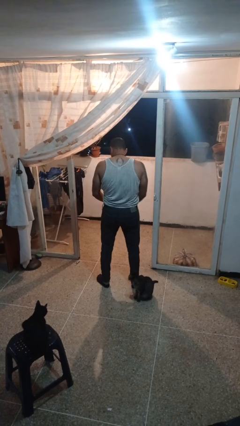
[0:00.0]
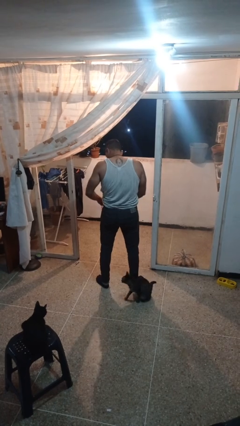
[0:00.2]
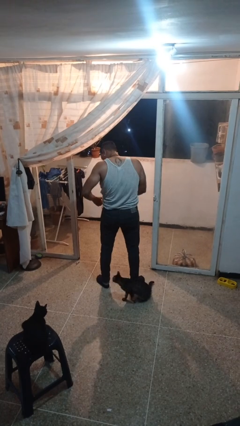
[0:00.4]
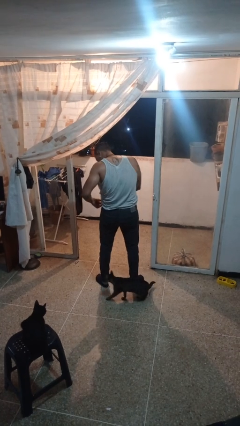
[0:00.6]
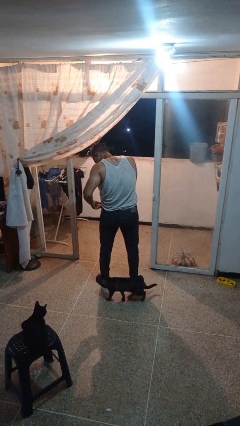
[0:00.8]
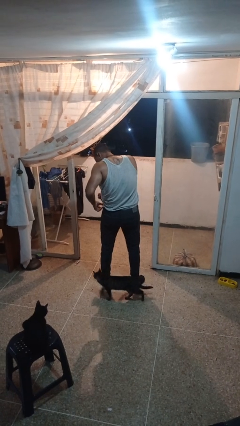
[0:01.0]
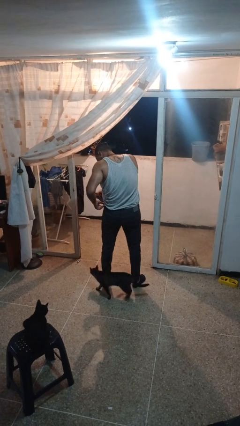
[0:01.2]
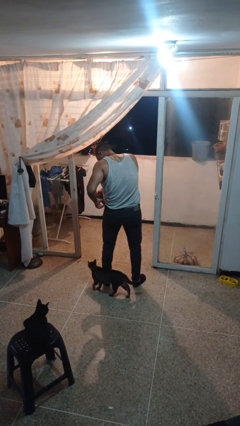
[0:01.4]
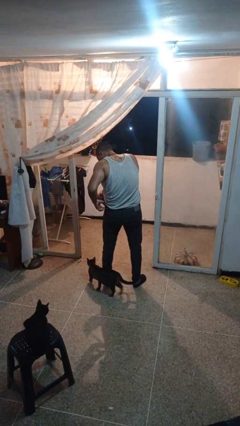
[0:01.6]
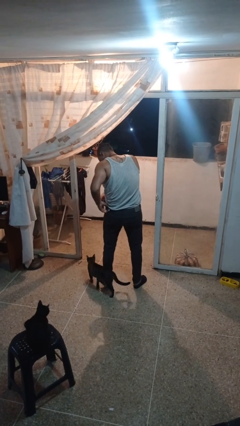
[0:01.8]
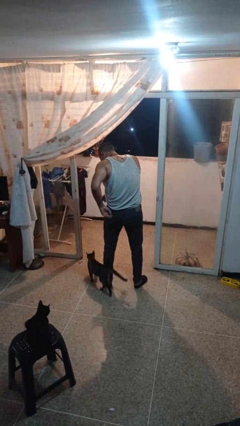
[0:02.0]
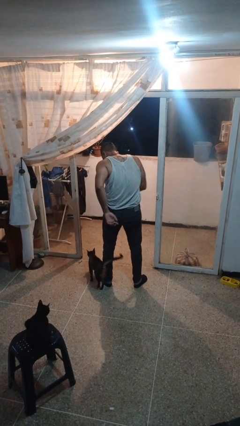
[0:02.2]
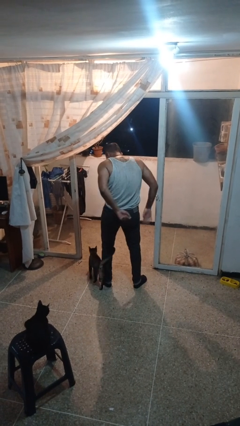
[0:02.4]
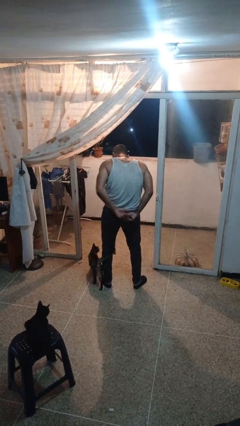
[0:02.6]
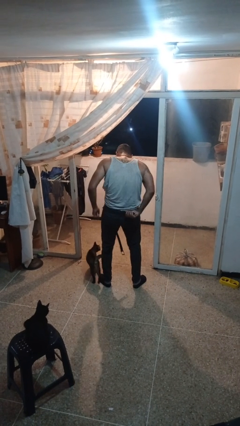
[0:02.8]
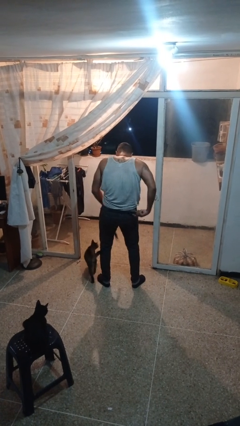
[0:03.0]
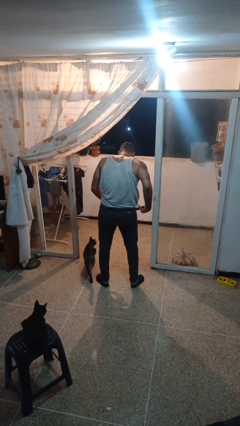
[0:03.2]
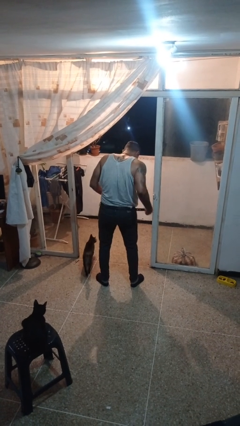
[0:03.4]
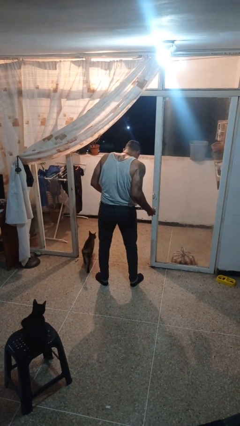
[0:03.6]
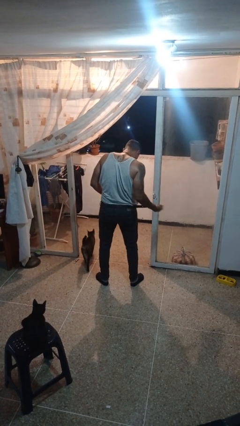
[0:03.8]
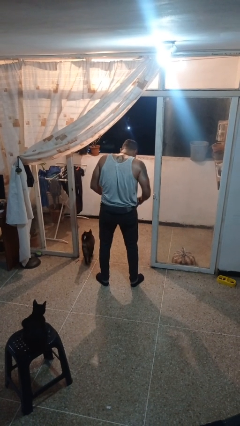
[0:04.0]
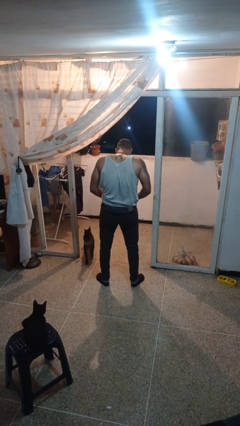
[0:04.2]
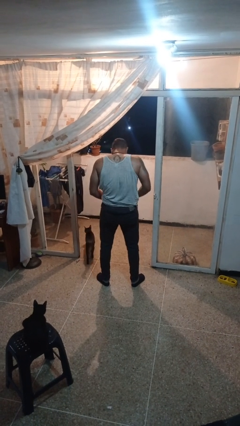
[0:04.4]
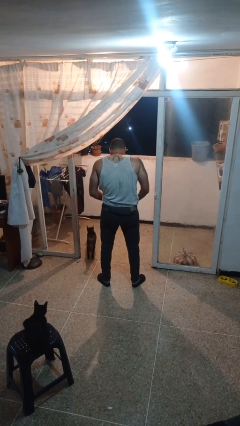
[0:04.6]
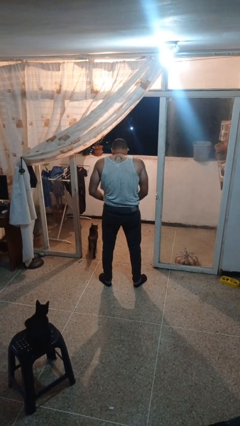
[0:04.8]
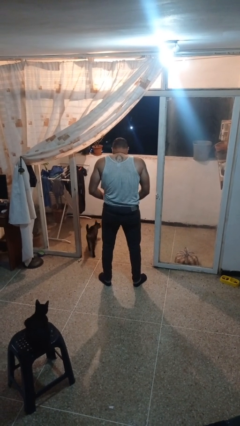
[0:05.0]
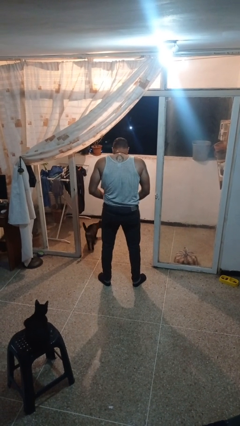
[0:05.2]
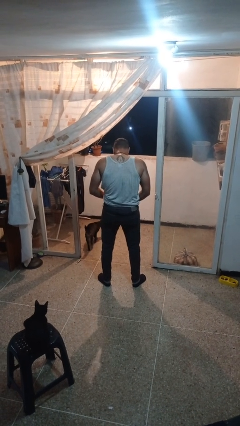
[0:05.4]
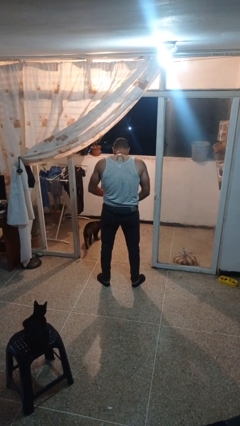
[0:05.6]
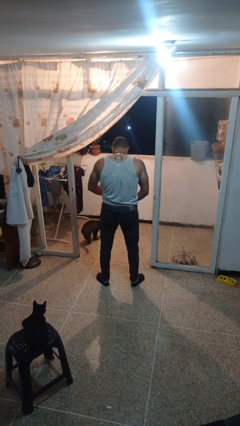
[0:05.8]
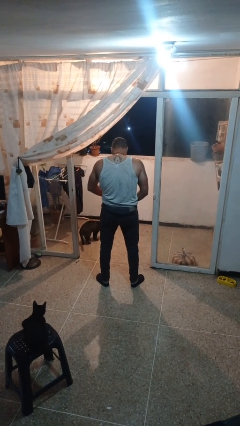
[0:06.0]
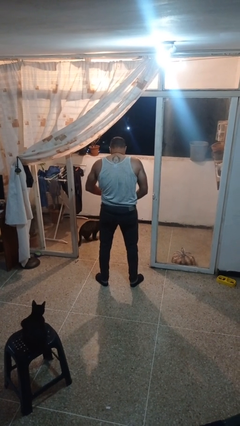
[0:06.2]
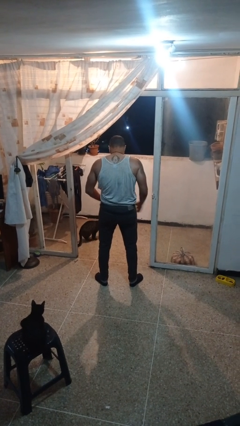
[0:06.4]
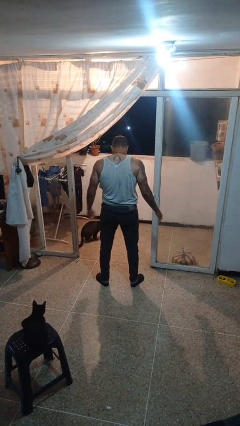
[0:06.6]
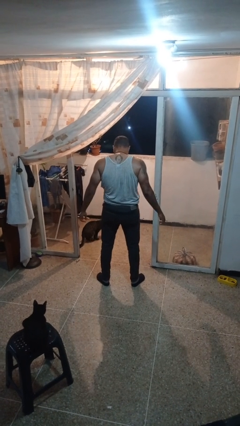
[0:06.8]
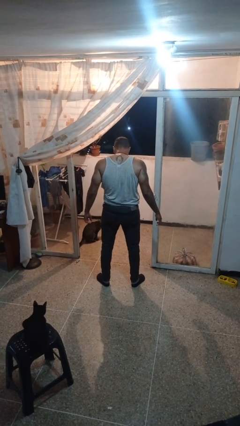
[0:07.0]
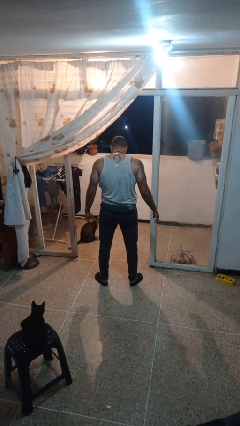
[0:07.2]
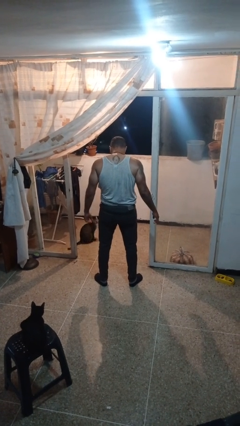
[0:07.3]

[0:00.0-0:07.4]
person puts on belt

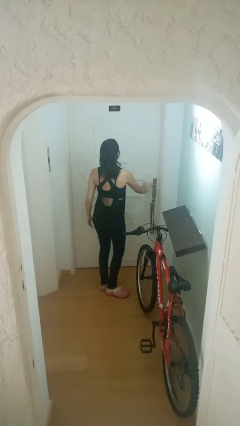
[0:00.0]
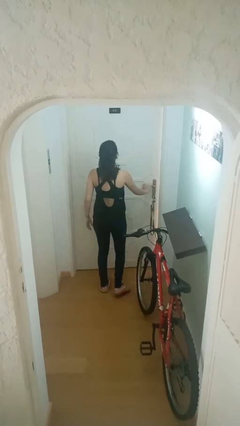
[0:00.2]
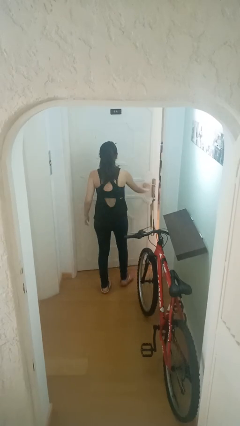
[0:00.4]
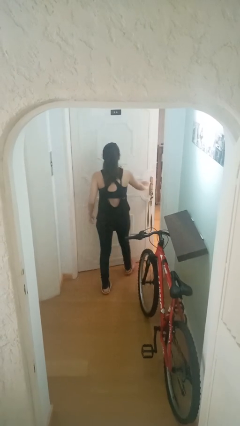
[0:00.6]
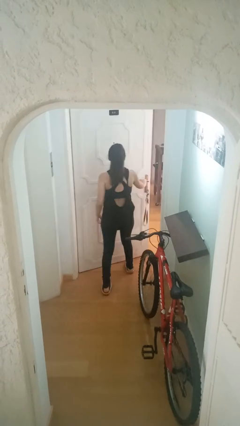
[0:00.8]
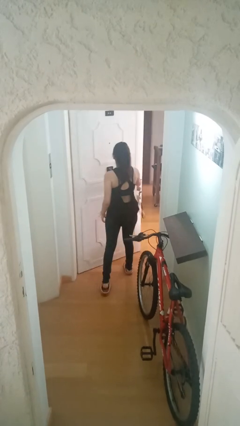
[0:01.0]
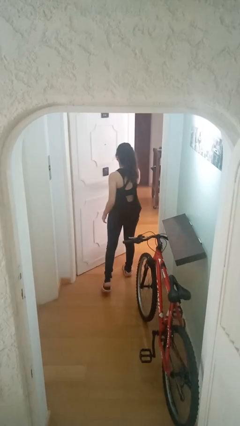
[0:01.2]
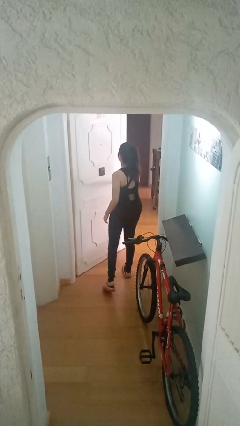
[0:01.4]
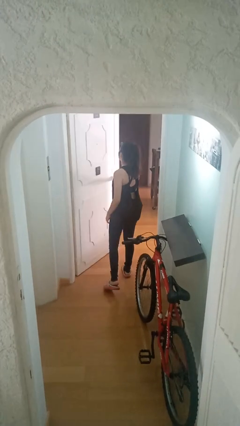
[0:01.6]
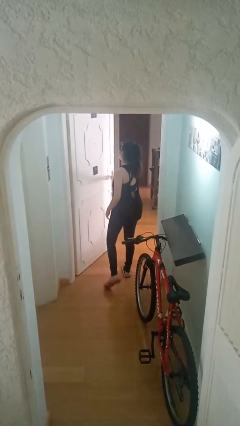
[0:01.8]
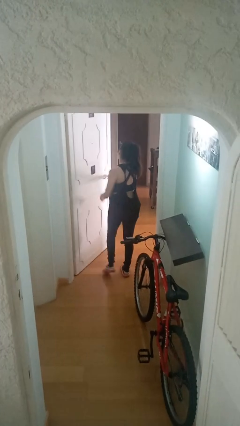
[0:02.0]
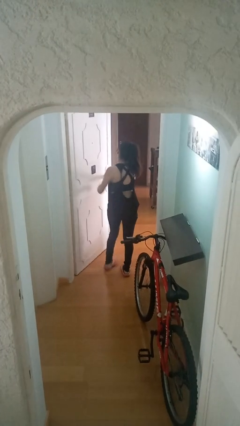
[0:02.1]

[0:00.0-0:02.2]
person opens facility door

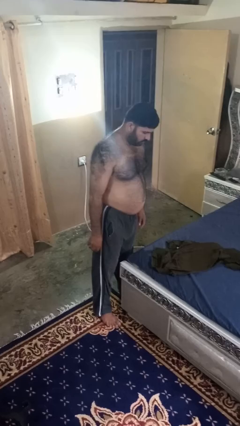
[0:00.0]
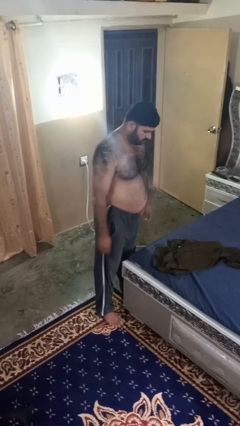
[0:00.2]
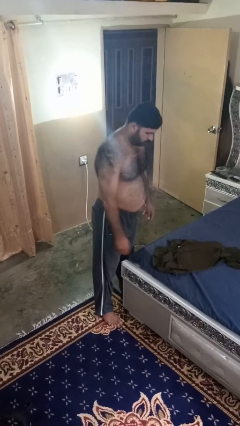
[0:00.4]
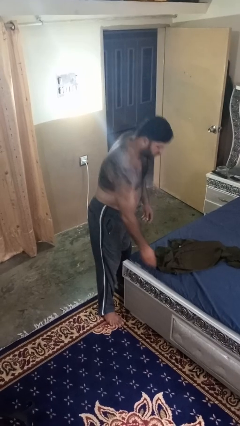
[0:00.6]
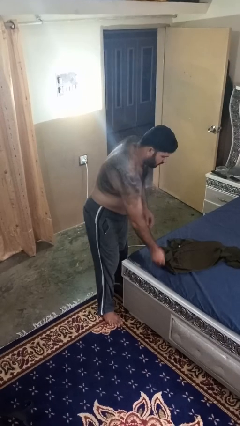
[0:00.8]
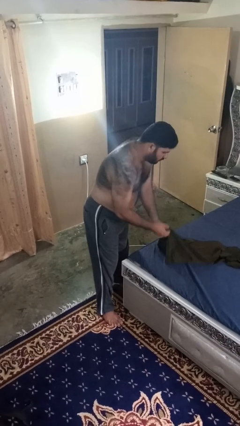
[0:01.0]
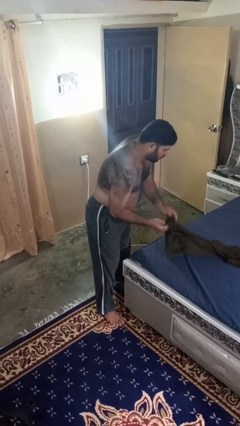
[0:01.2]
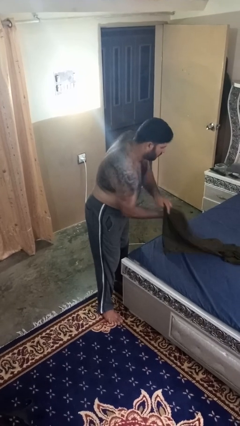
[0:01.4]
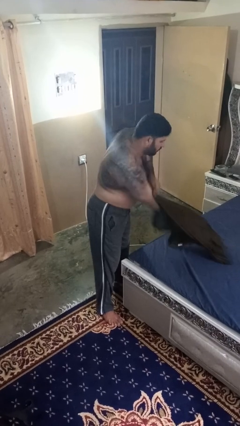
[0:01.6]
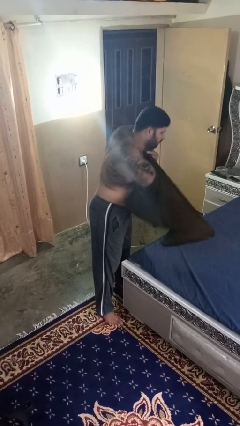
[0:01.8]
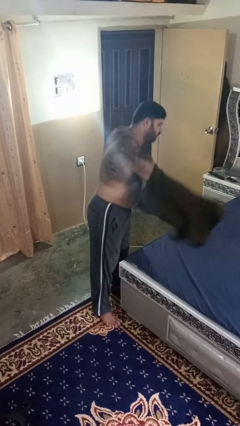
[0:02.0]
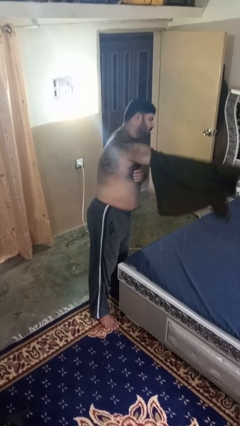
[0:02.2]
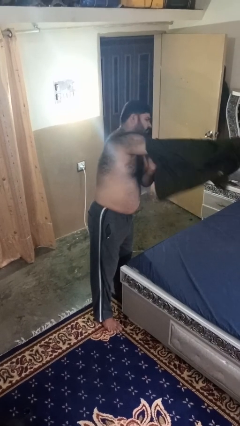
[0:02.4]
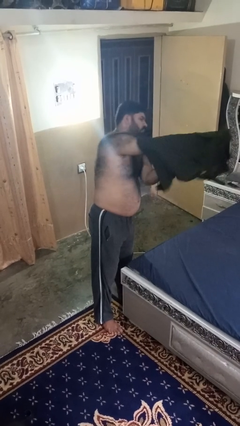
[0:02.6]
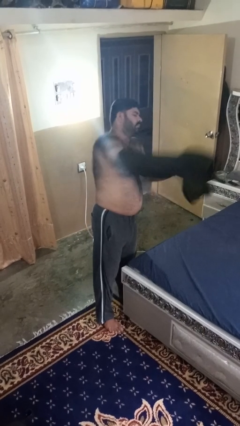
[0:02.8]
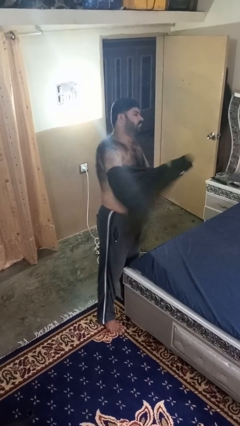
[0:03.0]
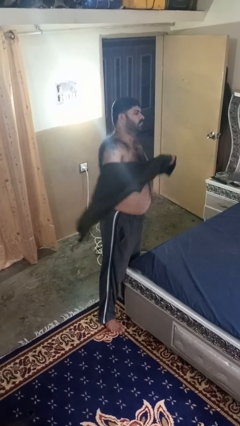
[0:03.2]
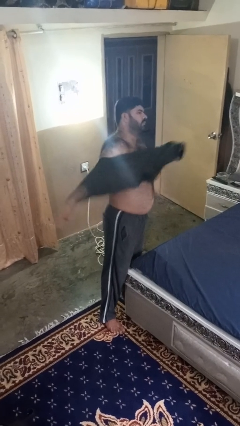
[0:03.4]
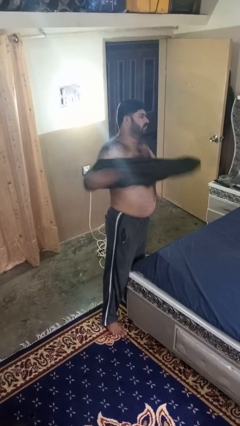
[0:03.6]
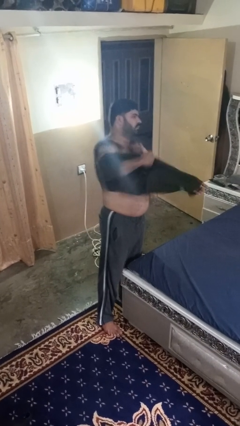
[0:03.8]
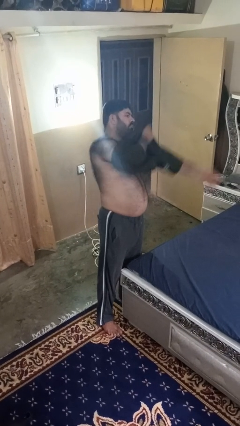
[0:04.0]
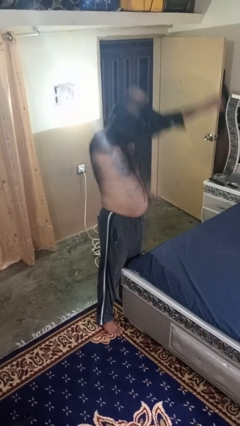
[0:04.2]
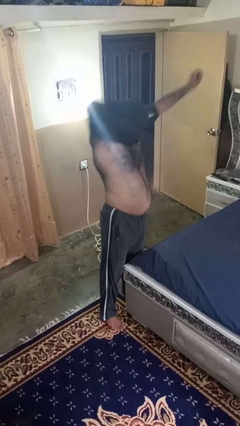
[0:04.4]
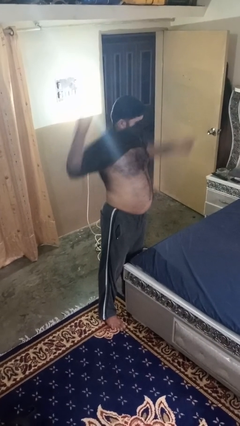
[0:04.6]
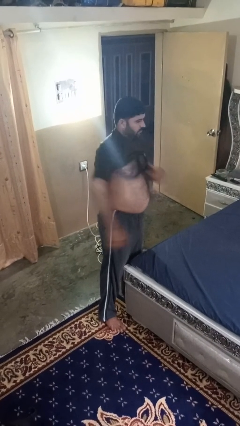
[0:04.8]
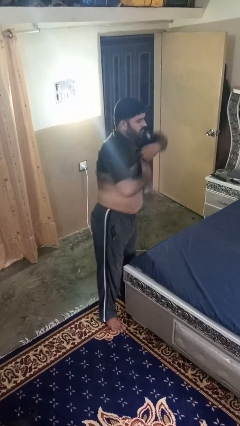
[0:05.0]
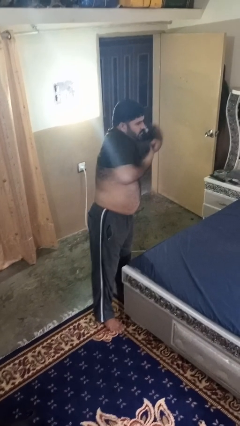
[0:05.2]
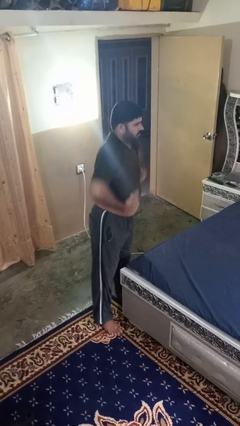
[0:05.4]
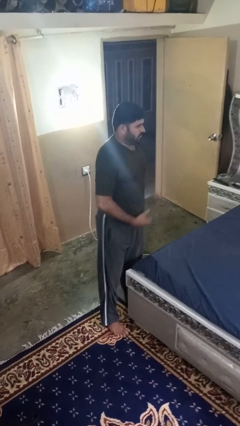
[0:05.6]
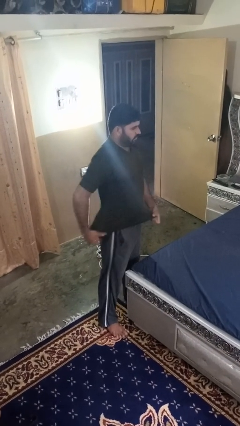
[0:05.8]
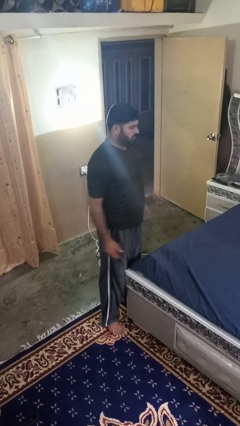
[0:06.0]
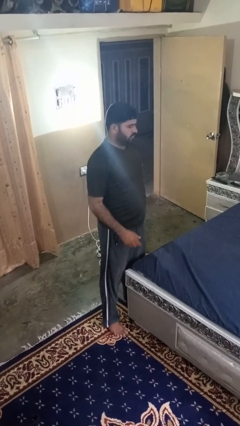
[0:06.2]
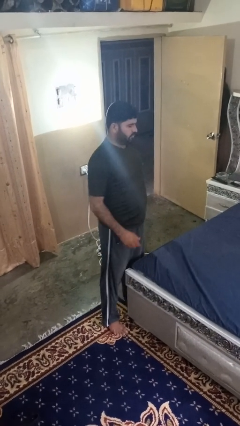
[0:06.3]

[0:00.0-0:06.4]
person puts on shirt

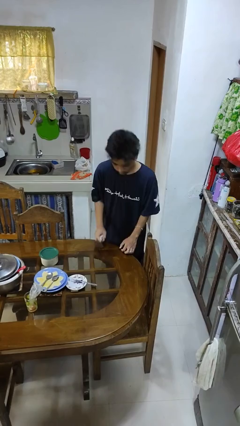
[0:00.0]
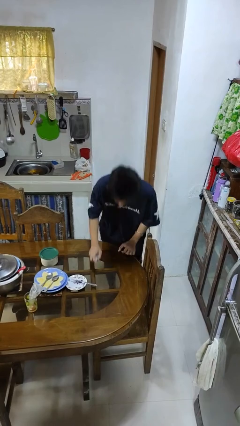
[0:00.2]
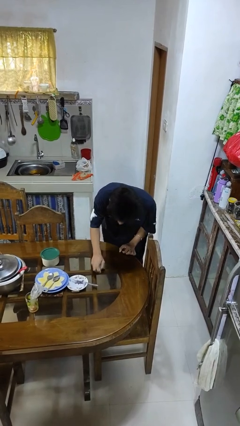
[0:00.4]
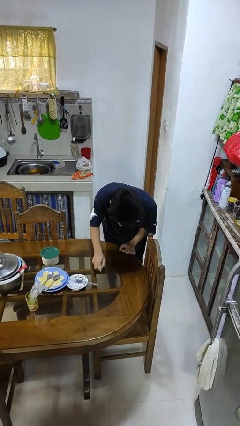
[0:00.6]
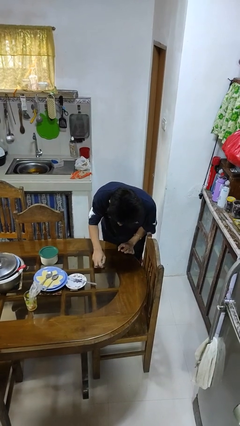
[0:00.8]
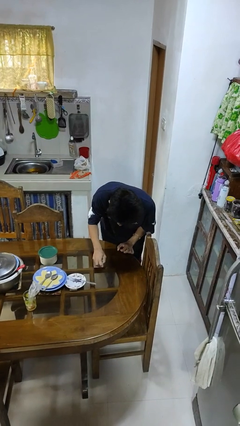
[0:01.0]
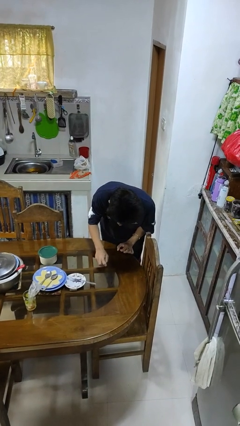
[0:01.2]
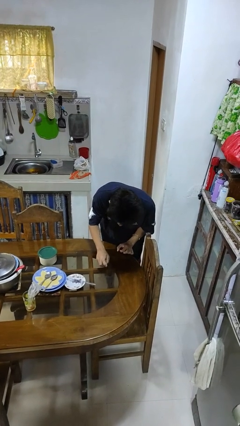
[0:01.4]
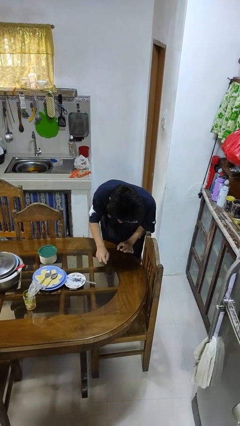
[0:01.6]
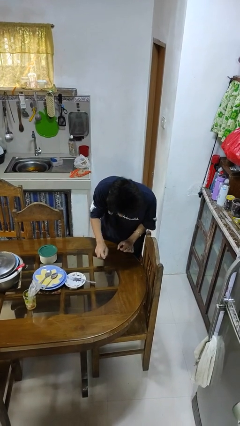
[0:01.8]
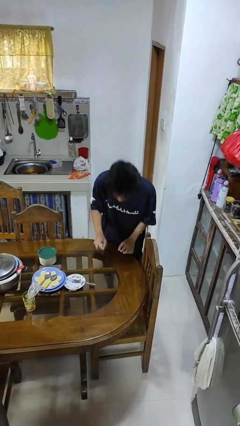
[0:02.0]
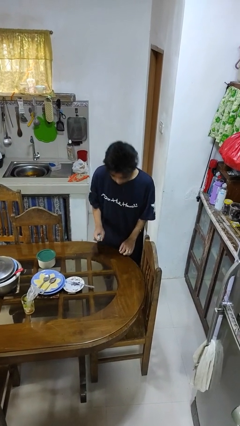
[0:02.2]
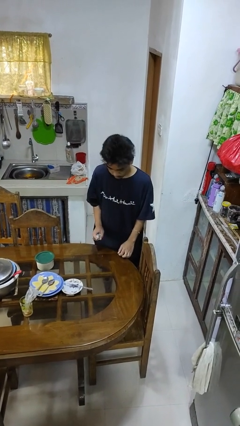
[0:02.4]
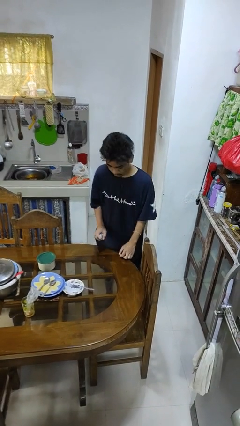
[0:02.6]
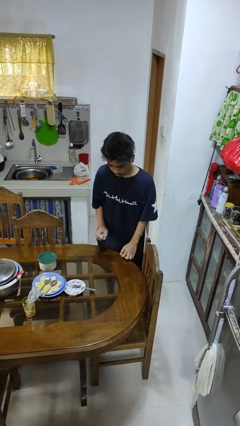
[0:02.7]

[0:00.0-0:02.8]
person sprays from bottle
